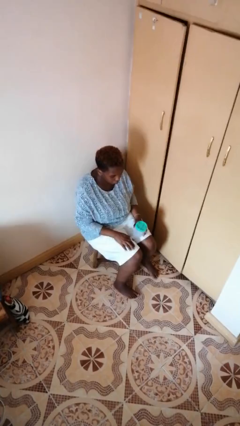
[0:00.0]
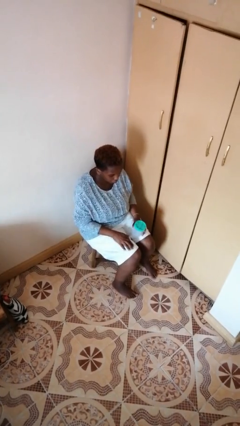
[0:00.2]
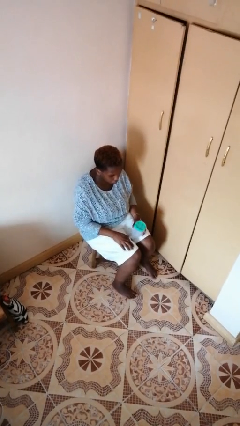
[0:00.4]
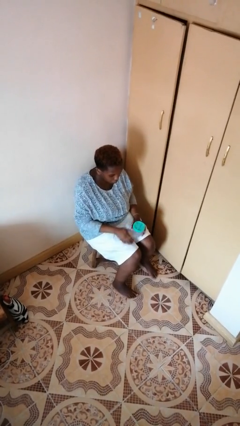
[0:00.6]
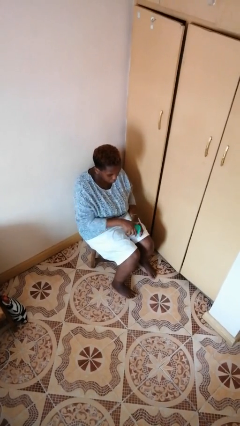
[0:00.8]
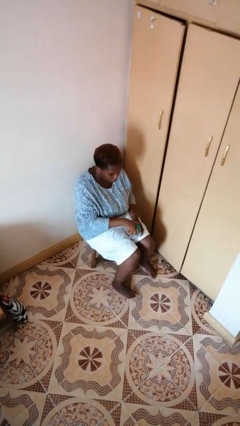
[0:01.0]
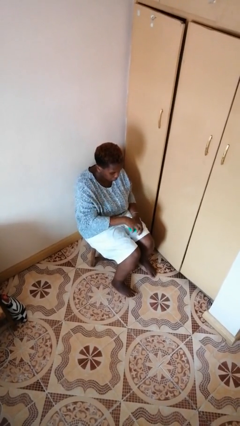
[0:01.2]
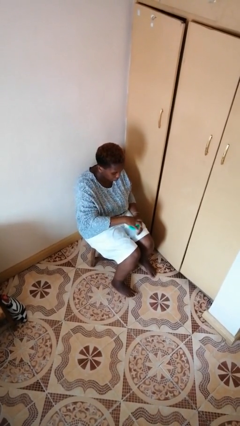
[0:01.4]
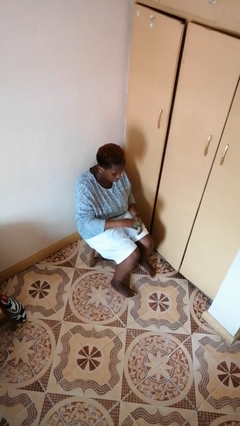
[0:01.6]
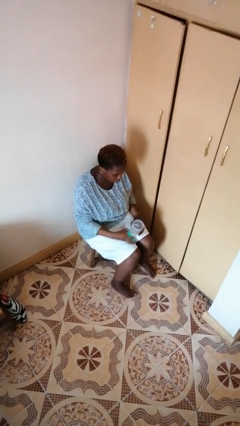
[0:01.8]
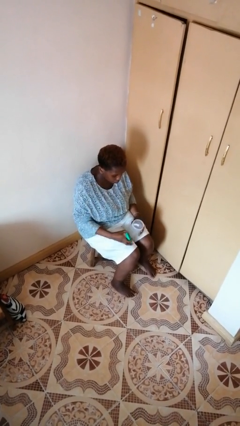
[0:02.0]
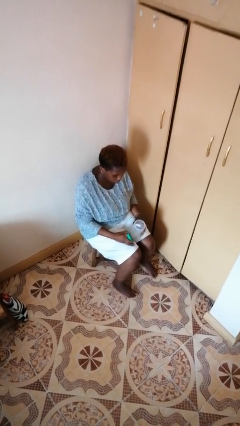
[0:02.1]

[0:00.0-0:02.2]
person opens jar

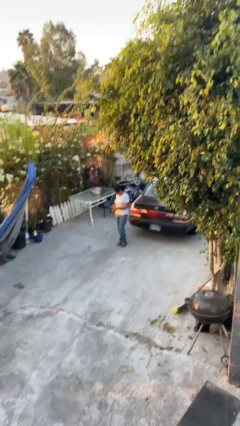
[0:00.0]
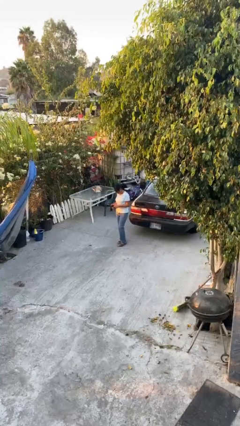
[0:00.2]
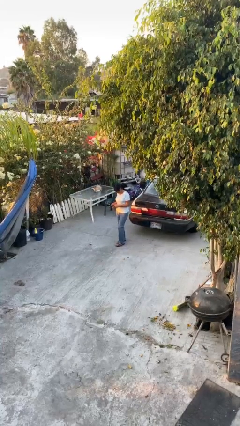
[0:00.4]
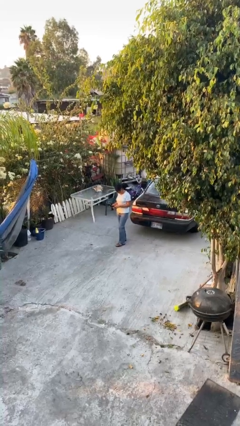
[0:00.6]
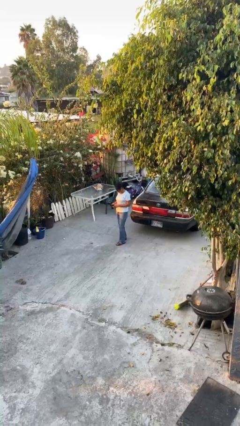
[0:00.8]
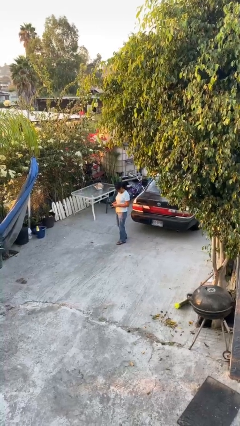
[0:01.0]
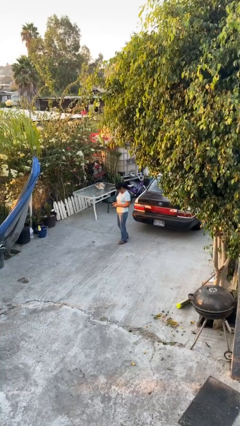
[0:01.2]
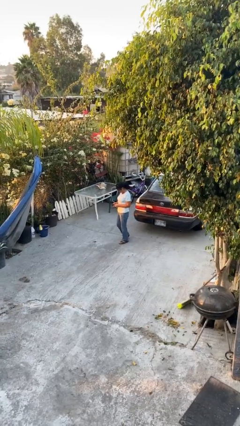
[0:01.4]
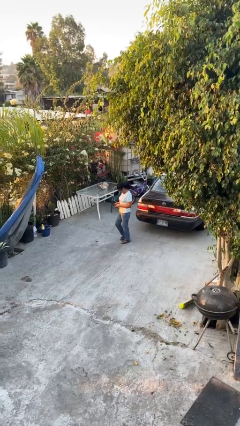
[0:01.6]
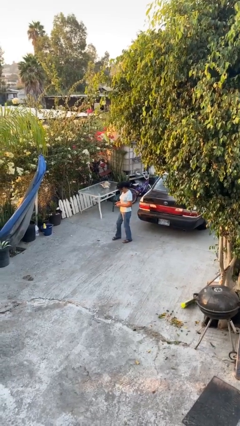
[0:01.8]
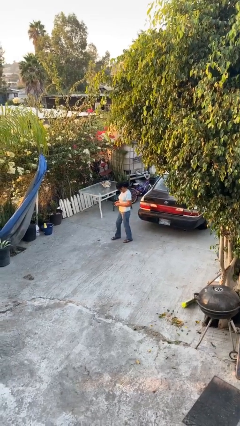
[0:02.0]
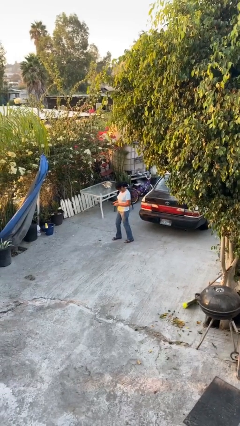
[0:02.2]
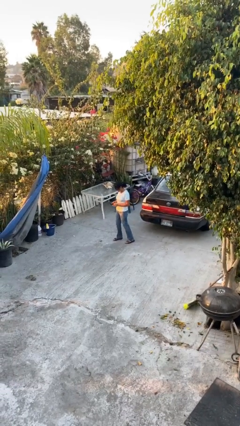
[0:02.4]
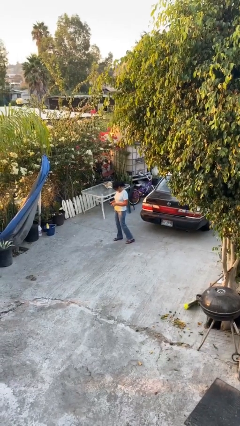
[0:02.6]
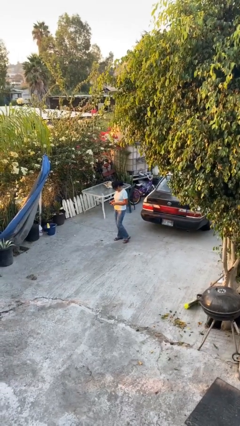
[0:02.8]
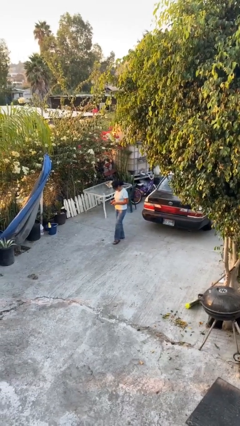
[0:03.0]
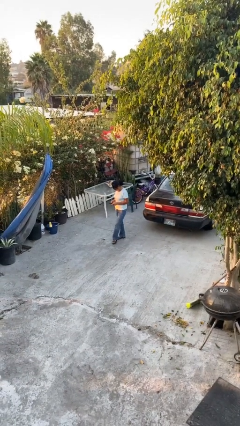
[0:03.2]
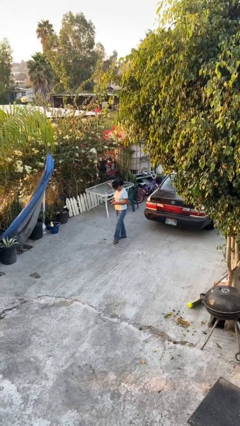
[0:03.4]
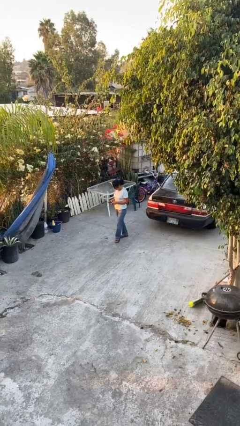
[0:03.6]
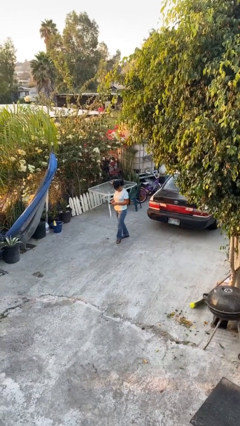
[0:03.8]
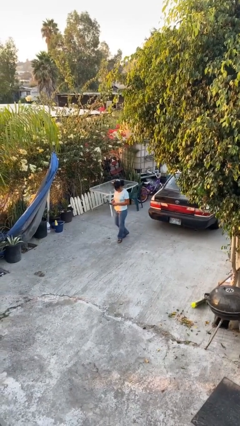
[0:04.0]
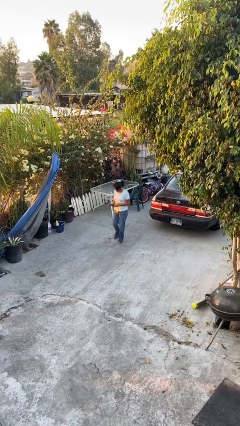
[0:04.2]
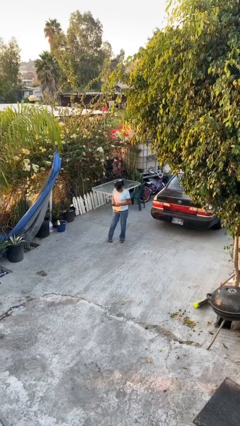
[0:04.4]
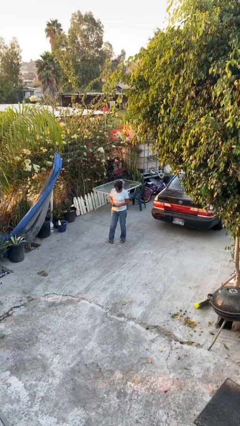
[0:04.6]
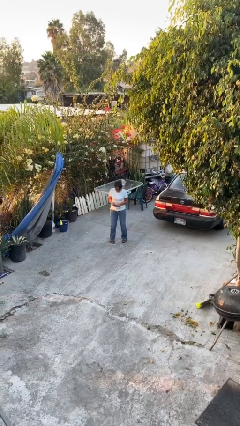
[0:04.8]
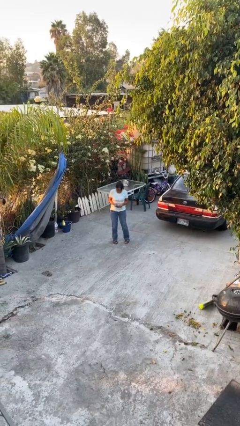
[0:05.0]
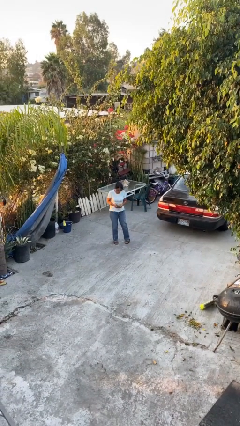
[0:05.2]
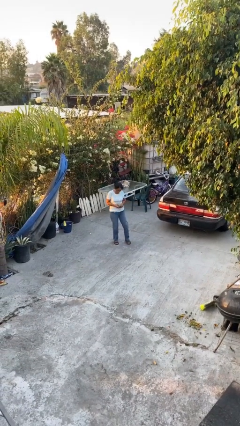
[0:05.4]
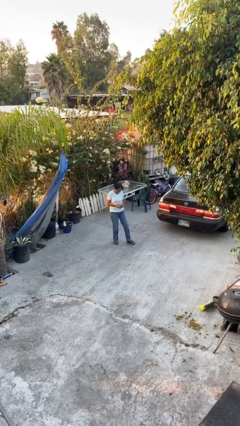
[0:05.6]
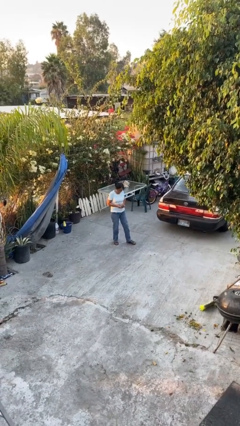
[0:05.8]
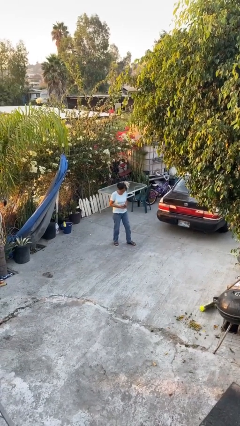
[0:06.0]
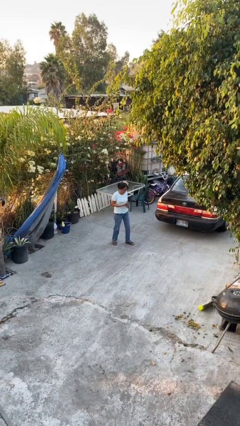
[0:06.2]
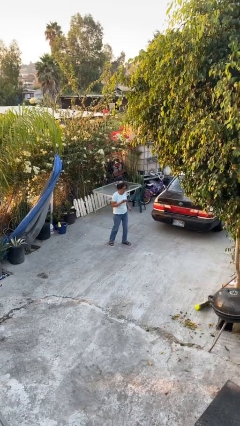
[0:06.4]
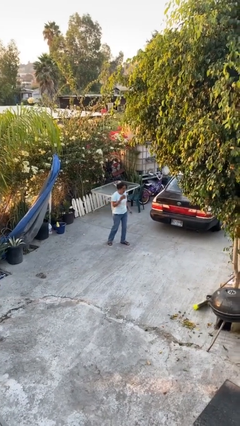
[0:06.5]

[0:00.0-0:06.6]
person texts on phone

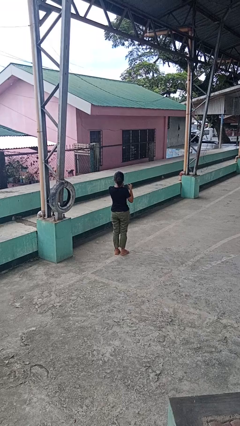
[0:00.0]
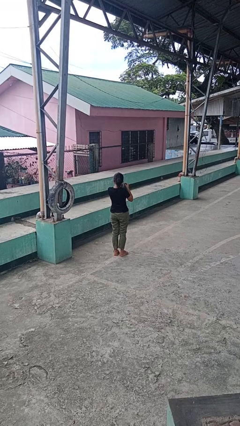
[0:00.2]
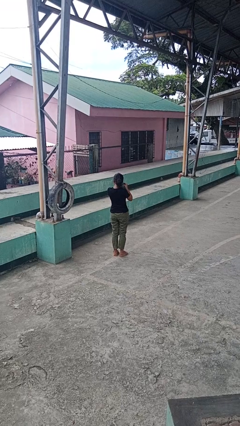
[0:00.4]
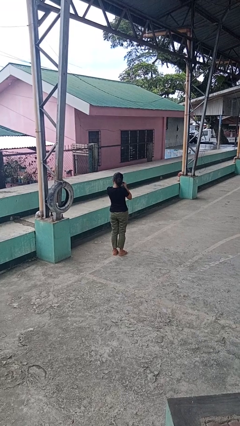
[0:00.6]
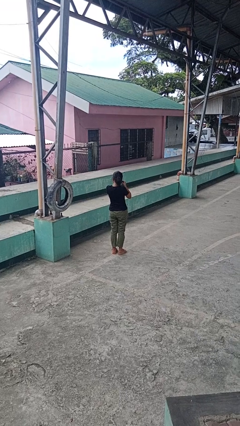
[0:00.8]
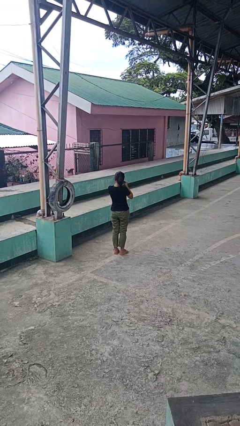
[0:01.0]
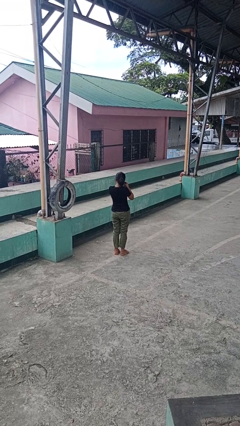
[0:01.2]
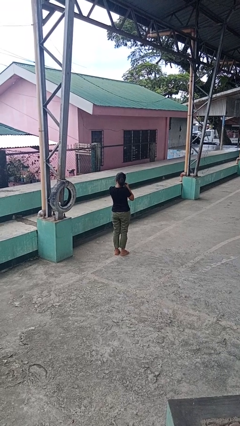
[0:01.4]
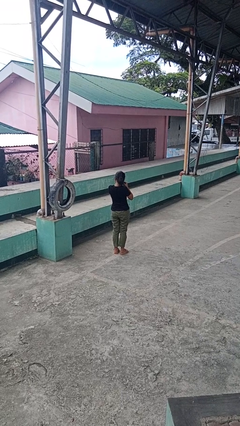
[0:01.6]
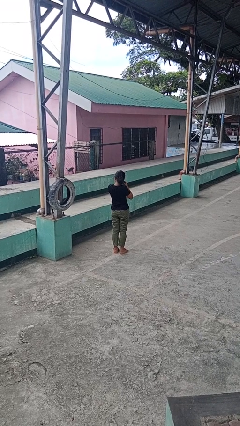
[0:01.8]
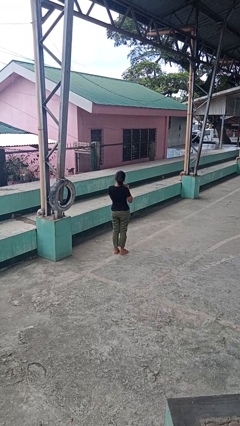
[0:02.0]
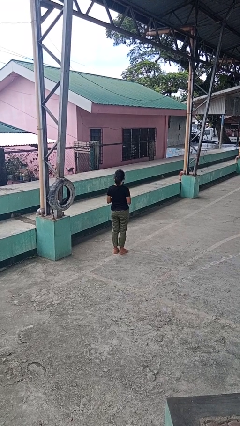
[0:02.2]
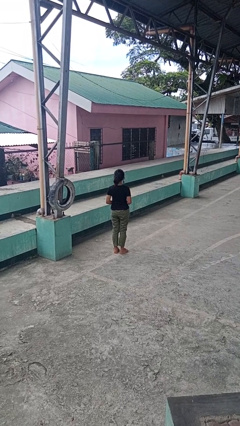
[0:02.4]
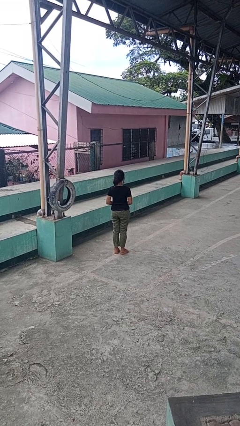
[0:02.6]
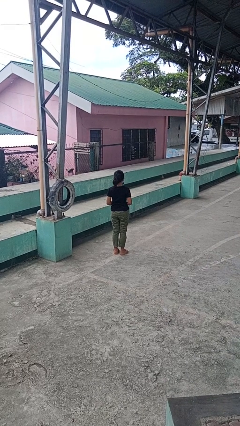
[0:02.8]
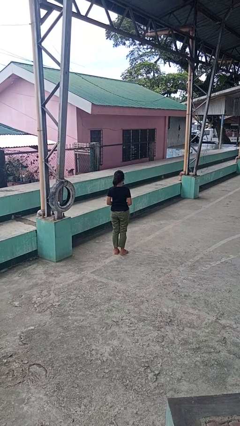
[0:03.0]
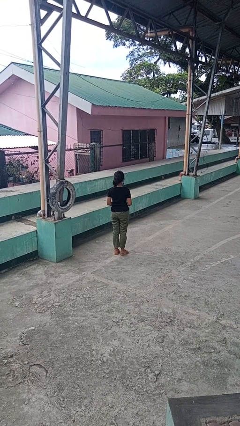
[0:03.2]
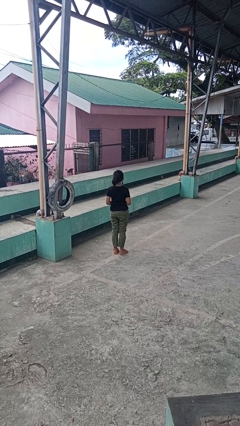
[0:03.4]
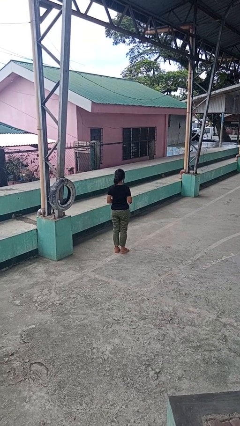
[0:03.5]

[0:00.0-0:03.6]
person puts on earrings

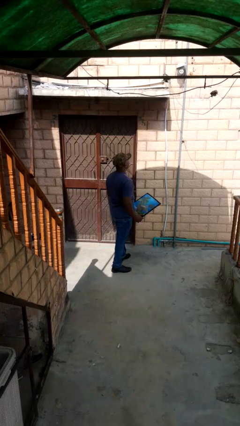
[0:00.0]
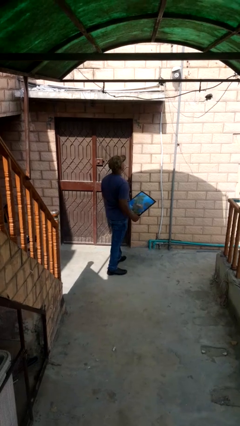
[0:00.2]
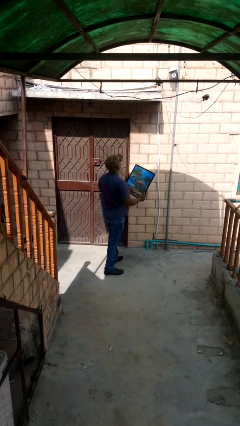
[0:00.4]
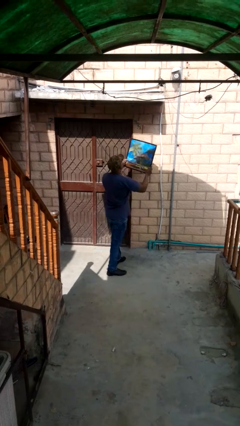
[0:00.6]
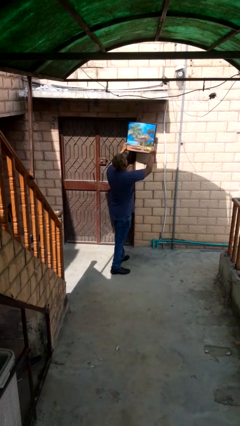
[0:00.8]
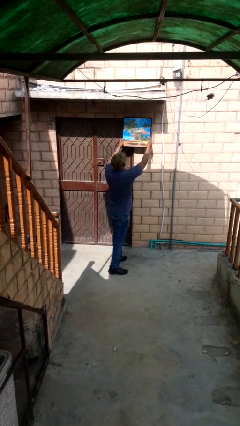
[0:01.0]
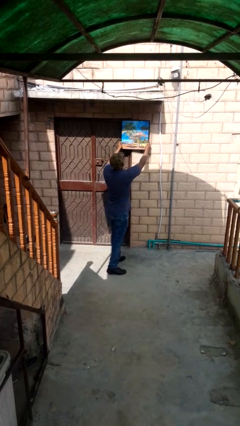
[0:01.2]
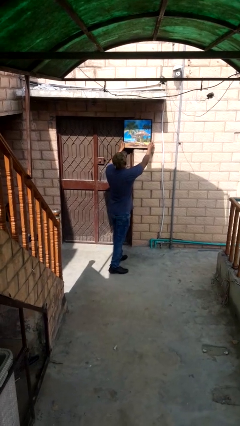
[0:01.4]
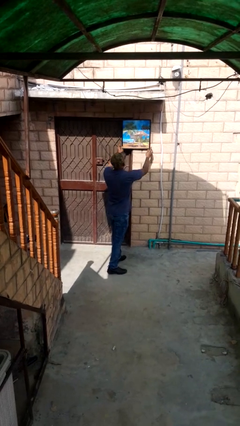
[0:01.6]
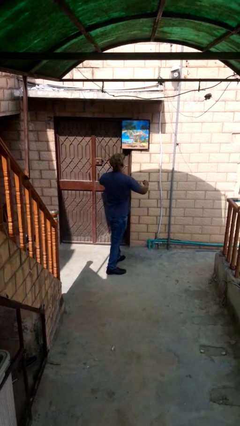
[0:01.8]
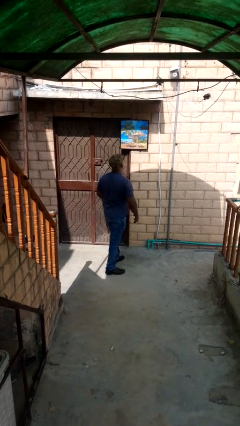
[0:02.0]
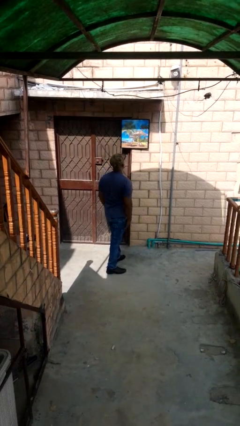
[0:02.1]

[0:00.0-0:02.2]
person puts up picture frame

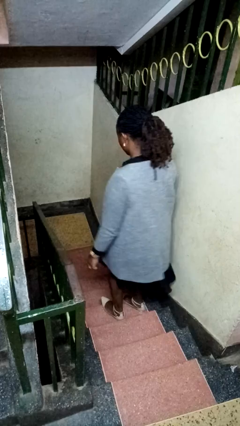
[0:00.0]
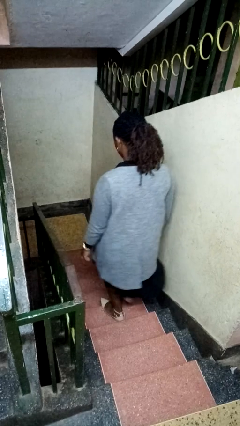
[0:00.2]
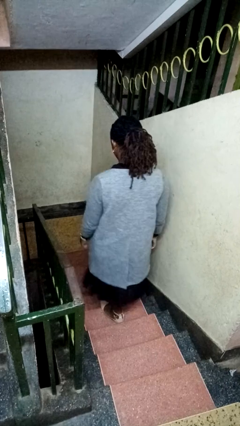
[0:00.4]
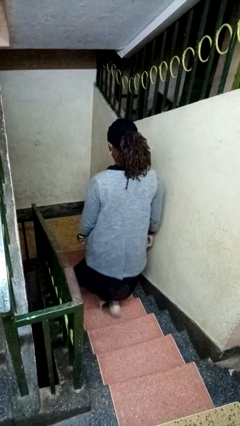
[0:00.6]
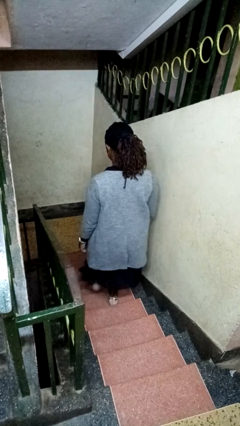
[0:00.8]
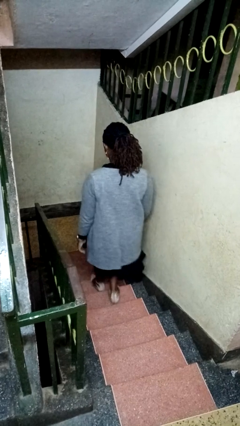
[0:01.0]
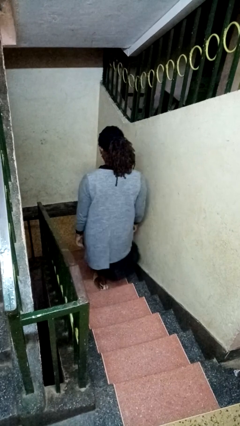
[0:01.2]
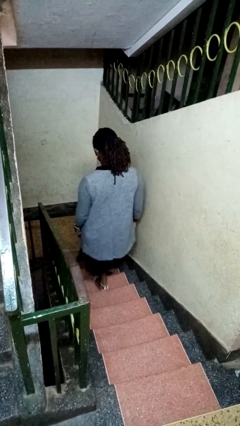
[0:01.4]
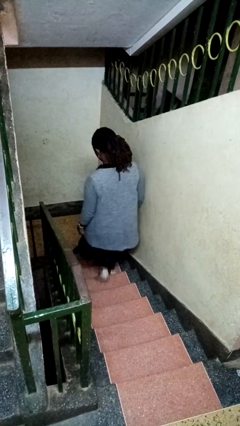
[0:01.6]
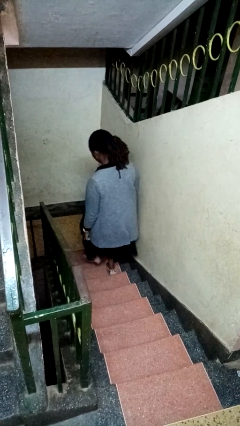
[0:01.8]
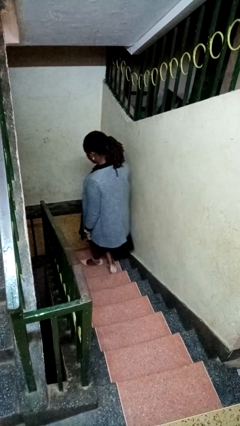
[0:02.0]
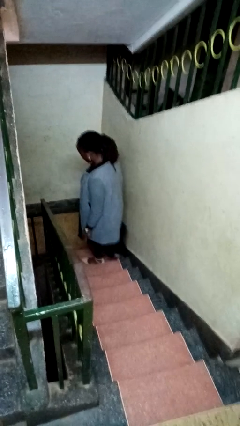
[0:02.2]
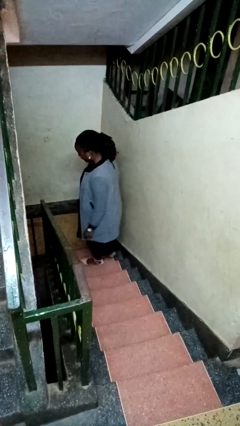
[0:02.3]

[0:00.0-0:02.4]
person climbs down stairs

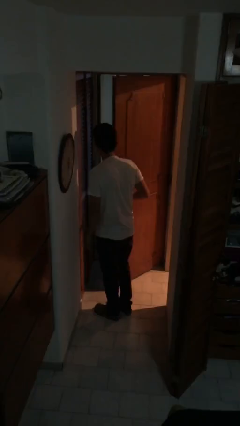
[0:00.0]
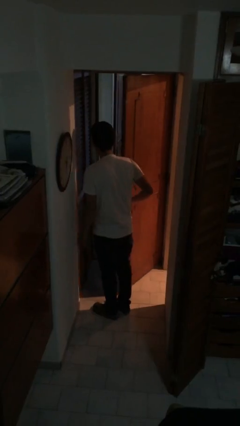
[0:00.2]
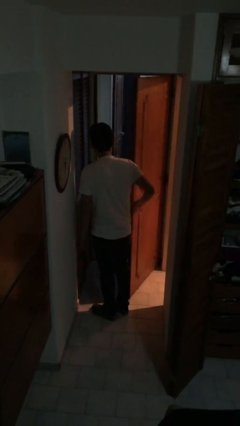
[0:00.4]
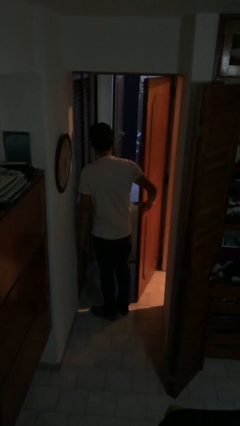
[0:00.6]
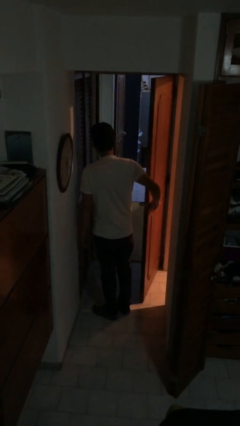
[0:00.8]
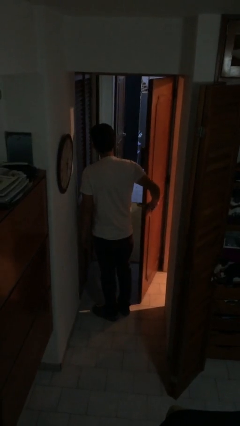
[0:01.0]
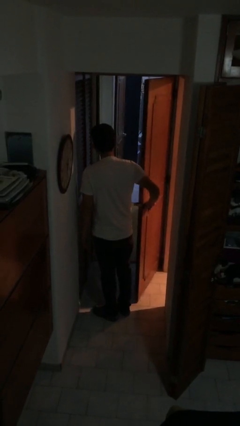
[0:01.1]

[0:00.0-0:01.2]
person opens facility door
